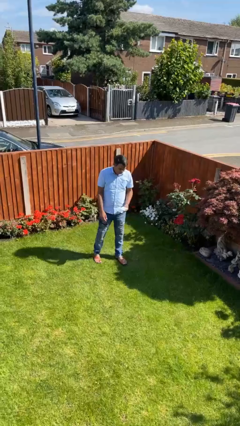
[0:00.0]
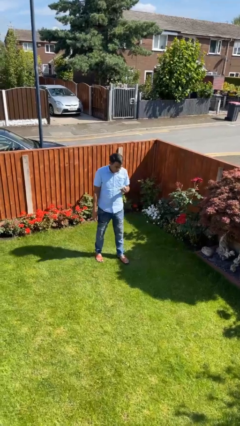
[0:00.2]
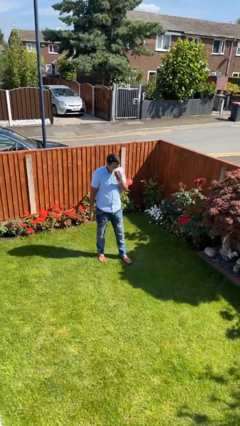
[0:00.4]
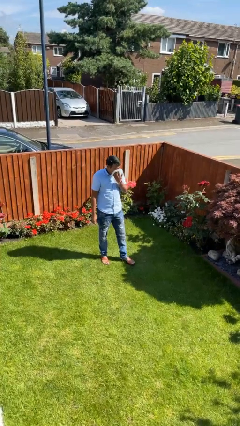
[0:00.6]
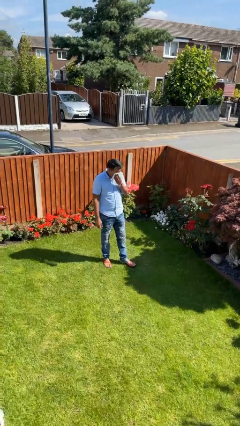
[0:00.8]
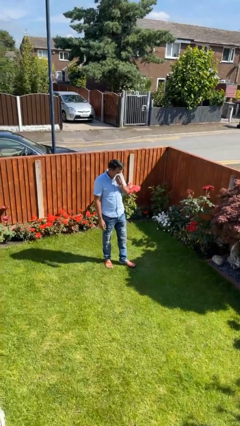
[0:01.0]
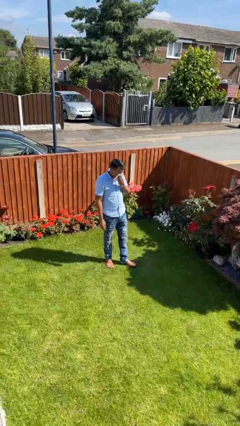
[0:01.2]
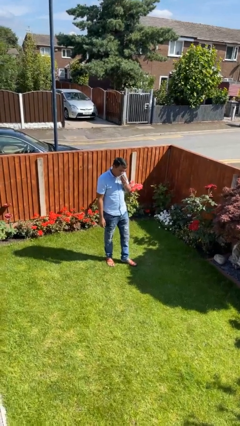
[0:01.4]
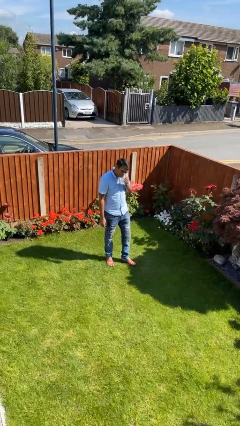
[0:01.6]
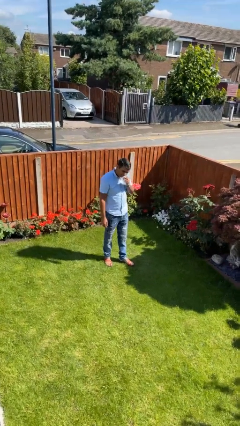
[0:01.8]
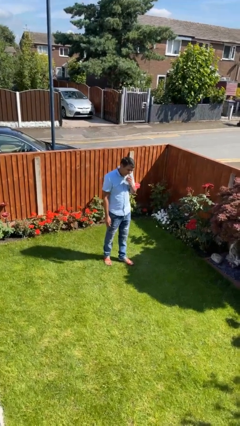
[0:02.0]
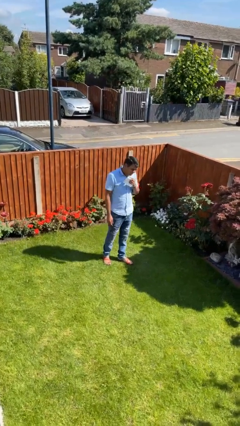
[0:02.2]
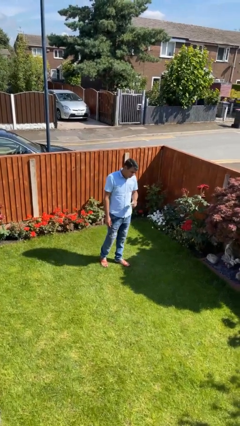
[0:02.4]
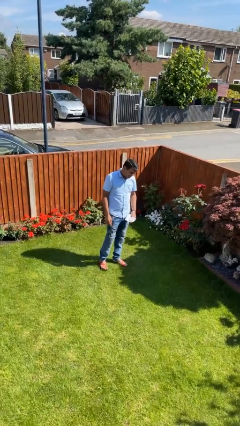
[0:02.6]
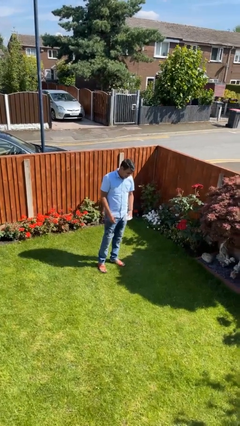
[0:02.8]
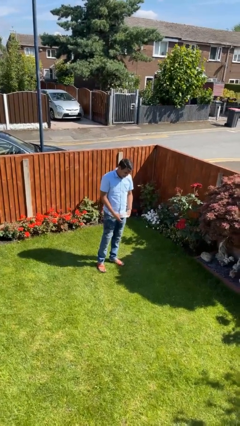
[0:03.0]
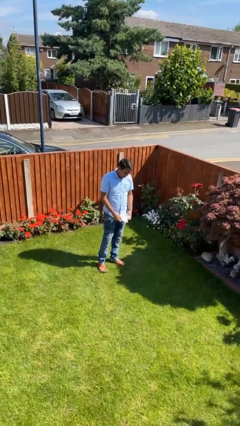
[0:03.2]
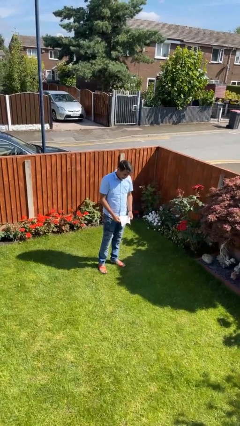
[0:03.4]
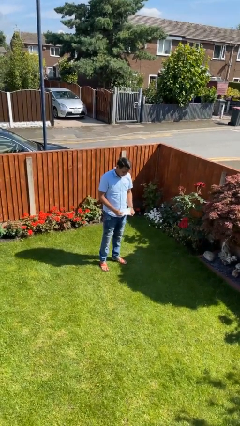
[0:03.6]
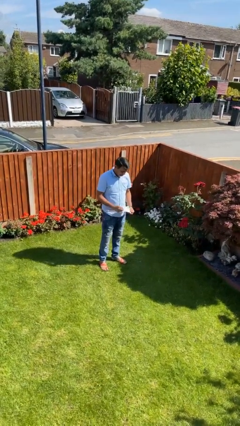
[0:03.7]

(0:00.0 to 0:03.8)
person wipes mouth with napkin

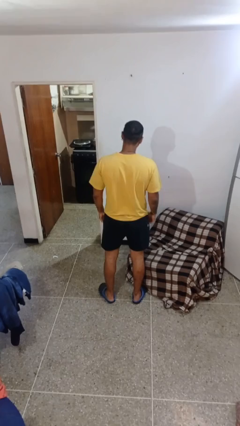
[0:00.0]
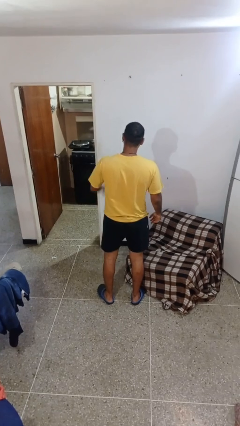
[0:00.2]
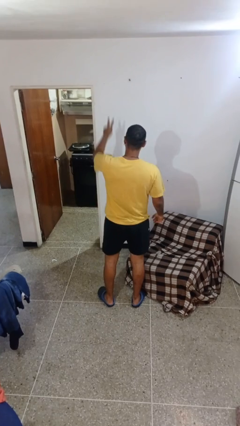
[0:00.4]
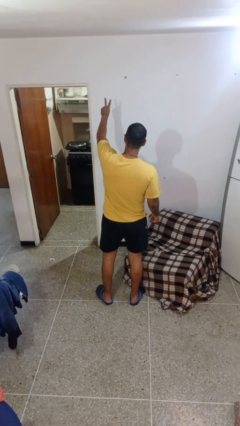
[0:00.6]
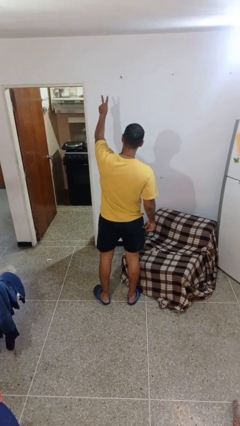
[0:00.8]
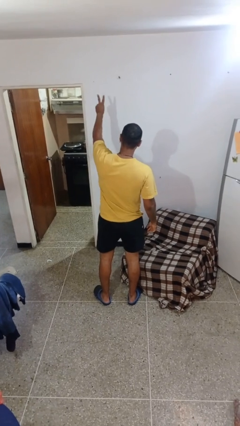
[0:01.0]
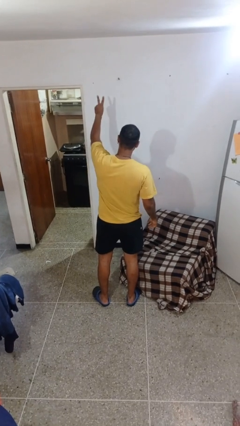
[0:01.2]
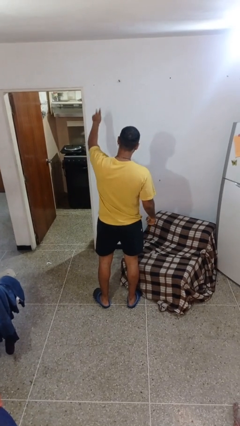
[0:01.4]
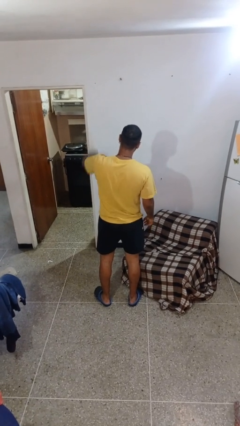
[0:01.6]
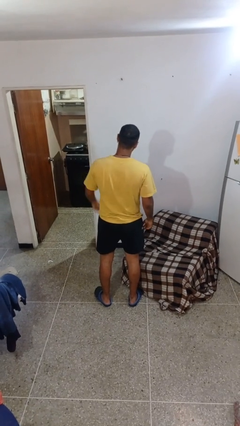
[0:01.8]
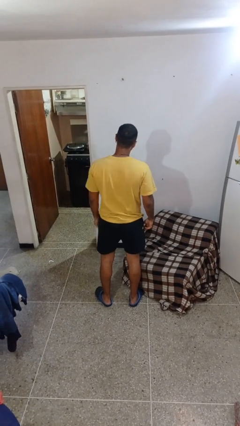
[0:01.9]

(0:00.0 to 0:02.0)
person gestures peace

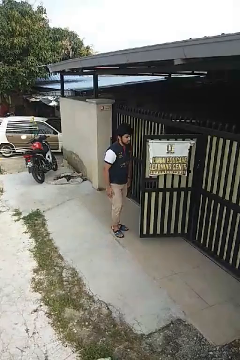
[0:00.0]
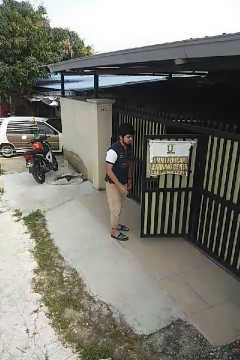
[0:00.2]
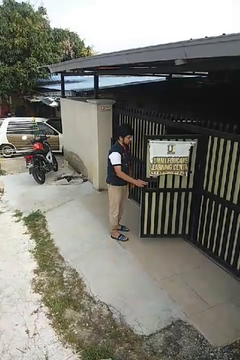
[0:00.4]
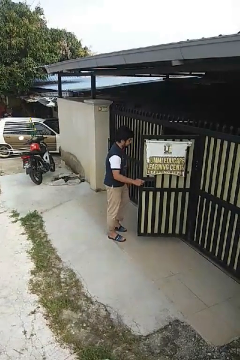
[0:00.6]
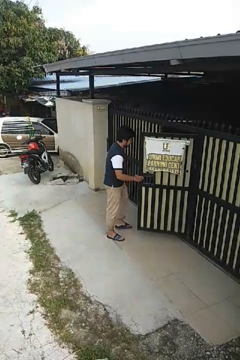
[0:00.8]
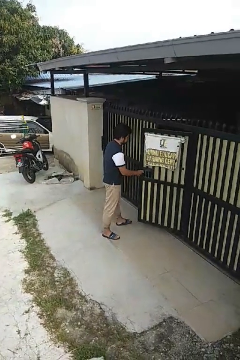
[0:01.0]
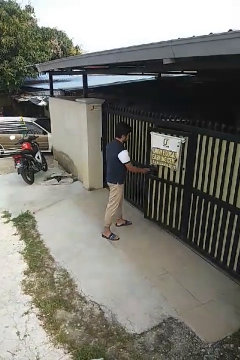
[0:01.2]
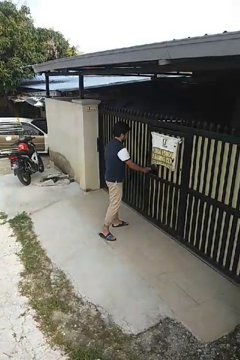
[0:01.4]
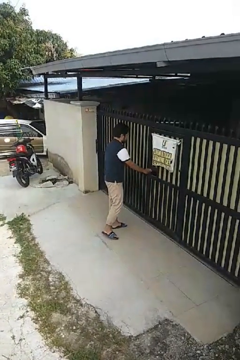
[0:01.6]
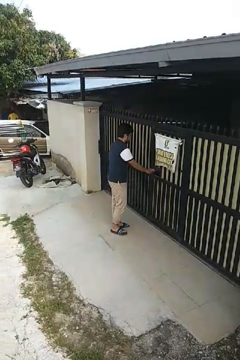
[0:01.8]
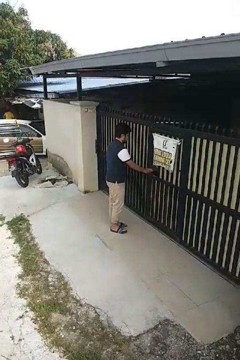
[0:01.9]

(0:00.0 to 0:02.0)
person closes gate

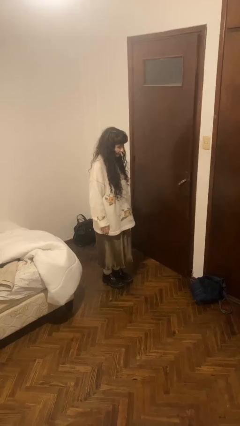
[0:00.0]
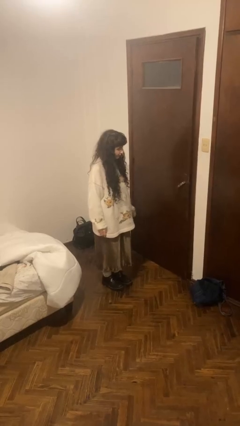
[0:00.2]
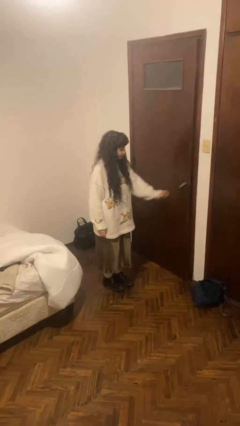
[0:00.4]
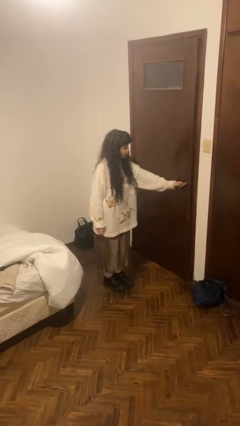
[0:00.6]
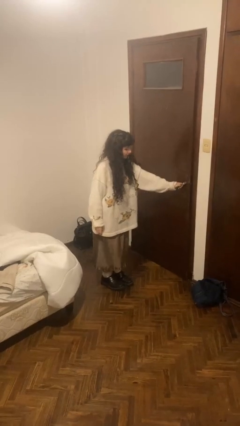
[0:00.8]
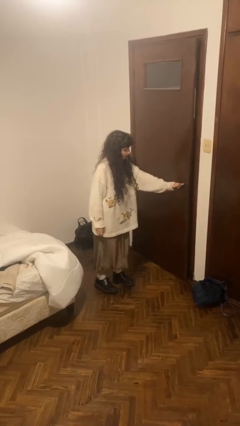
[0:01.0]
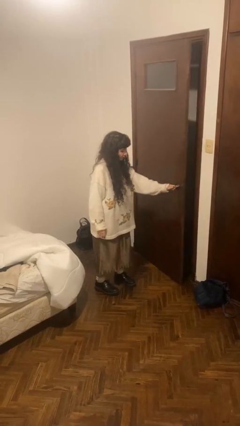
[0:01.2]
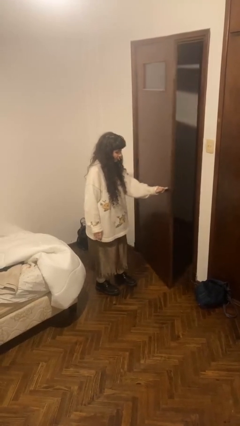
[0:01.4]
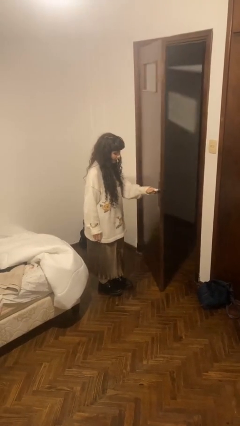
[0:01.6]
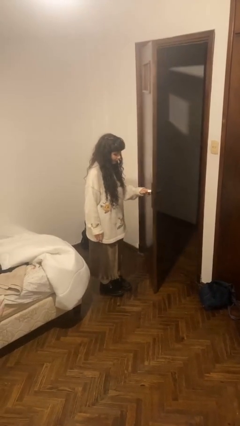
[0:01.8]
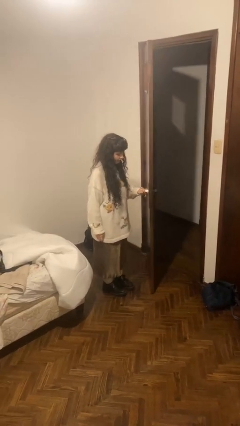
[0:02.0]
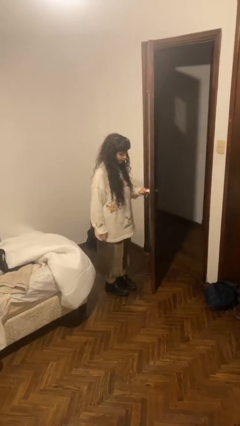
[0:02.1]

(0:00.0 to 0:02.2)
person opens facility door

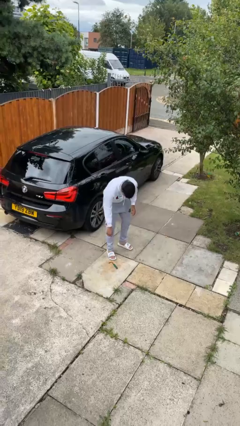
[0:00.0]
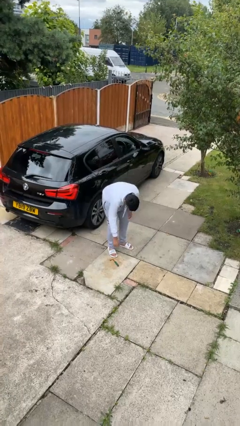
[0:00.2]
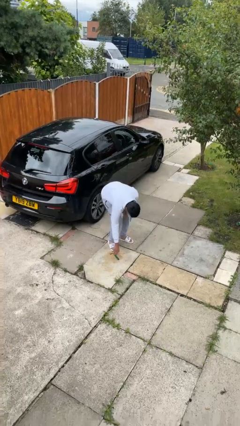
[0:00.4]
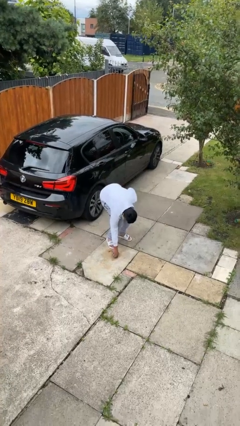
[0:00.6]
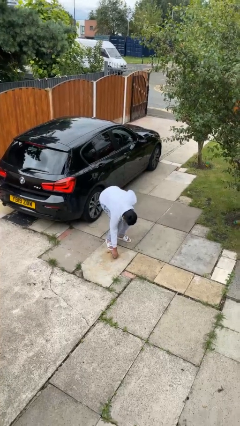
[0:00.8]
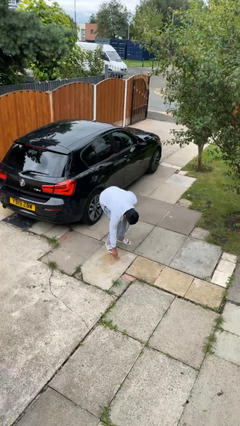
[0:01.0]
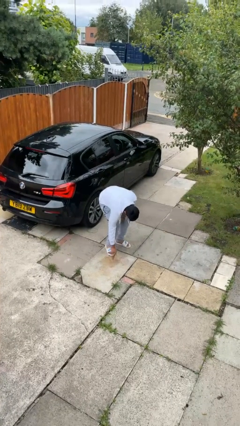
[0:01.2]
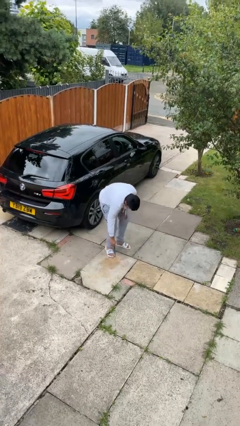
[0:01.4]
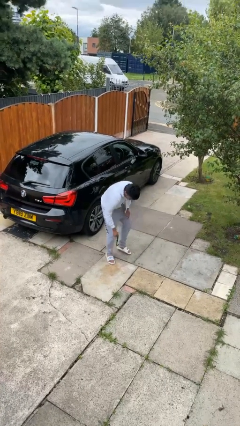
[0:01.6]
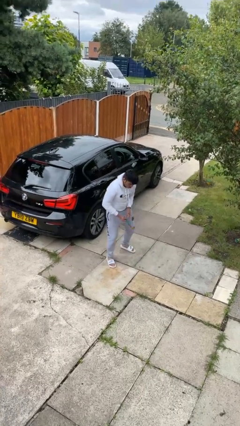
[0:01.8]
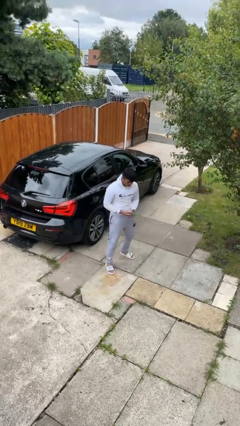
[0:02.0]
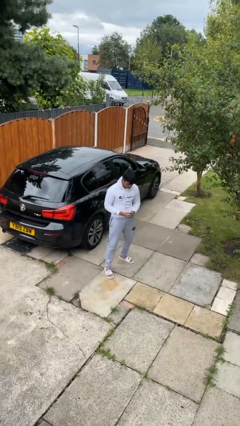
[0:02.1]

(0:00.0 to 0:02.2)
person picks up object from floor

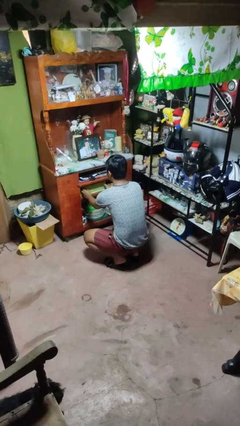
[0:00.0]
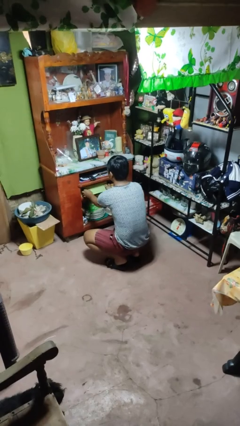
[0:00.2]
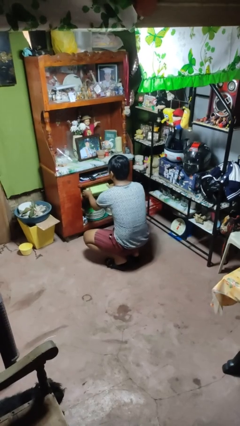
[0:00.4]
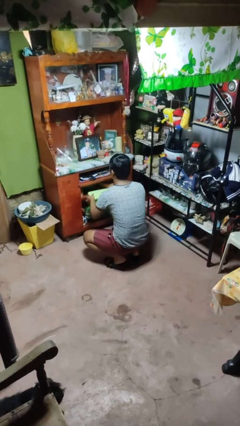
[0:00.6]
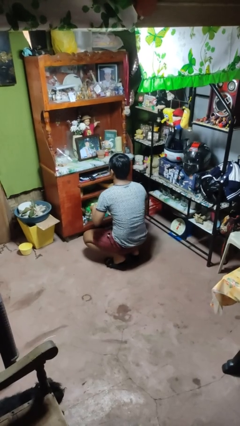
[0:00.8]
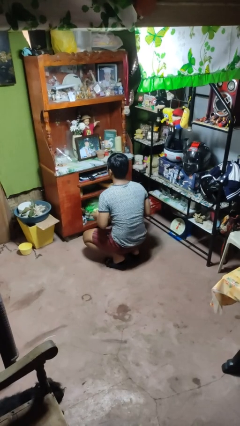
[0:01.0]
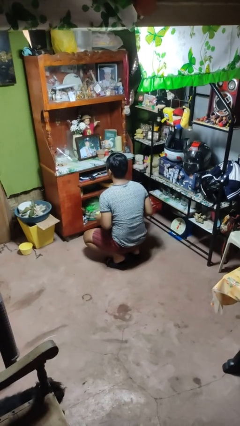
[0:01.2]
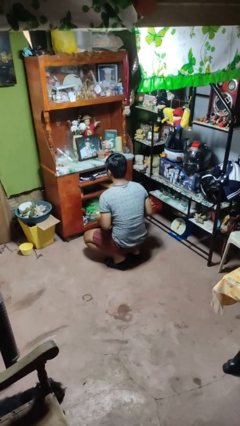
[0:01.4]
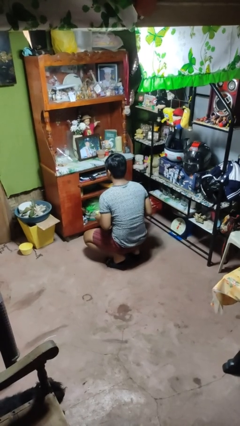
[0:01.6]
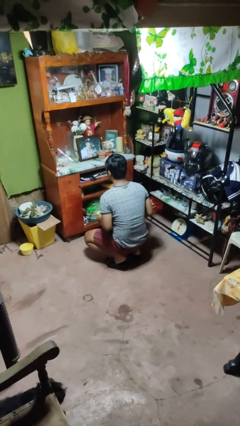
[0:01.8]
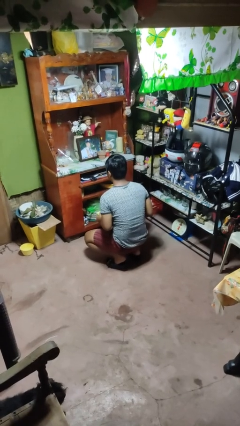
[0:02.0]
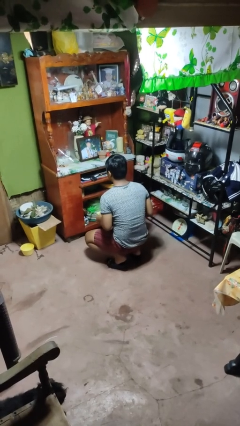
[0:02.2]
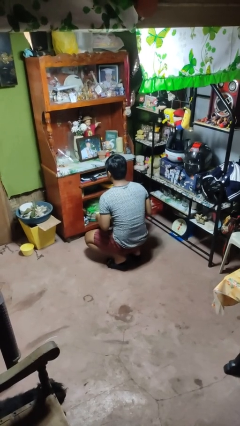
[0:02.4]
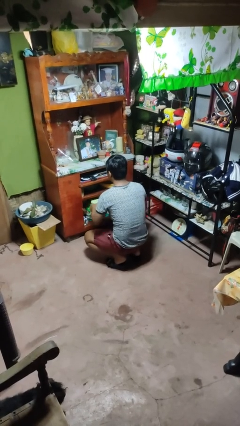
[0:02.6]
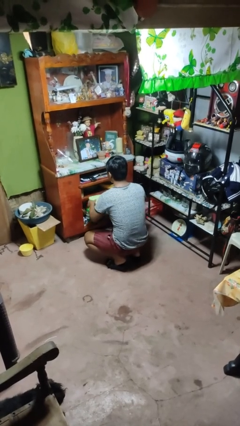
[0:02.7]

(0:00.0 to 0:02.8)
person picks up object from cabinet

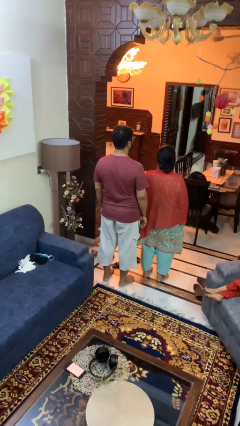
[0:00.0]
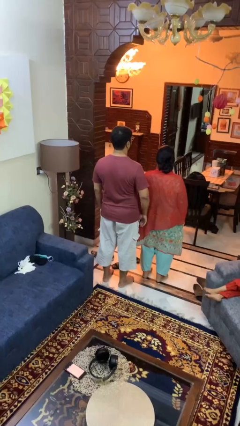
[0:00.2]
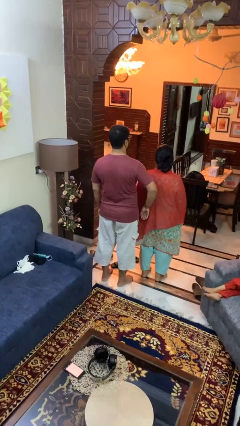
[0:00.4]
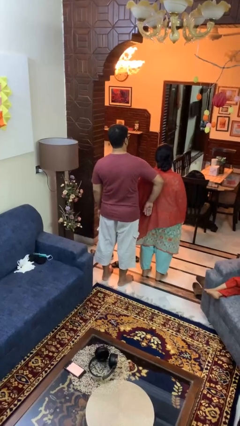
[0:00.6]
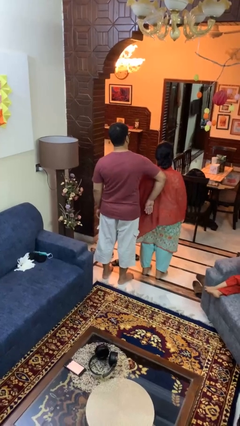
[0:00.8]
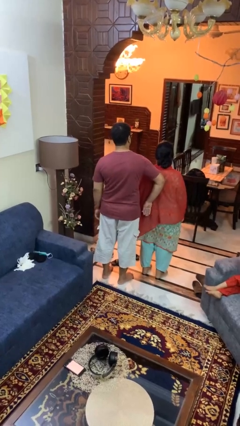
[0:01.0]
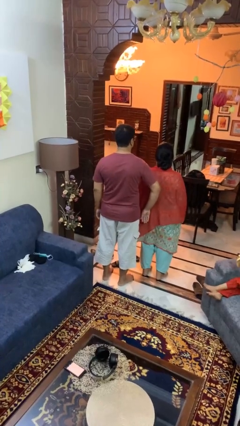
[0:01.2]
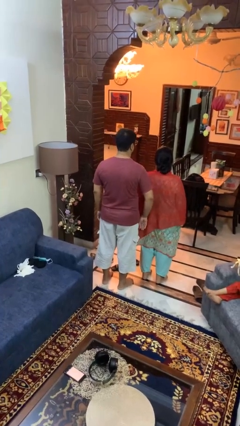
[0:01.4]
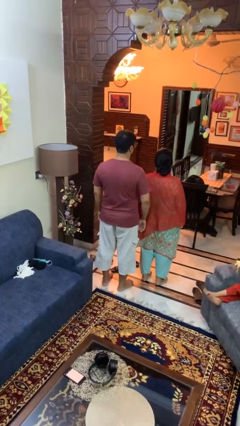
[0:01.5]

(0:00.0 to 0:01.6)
person shoves person

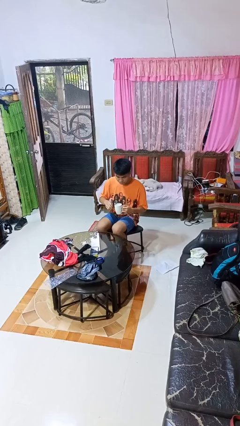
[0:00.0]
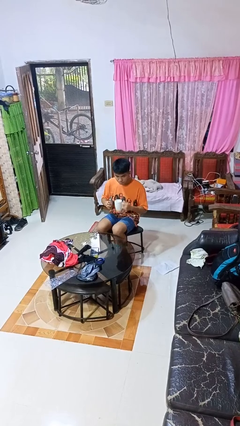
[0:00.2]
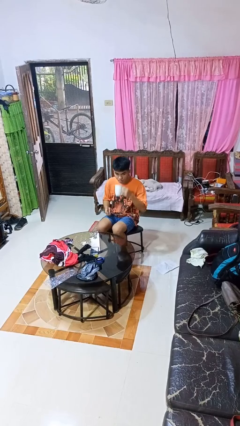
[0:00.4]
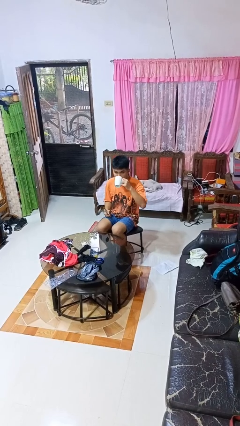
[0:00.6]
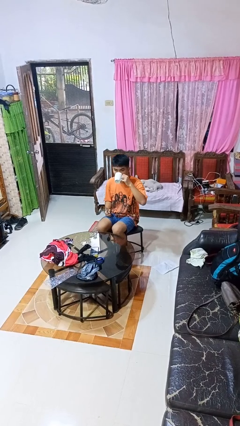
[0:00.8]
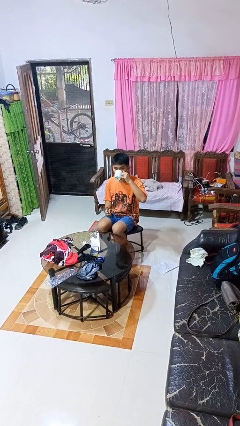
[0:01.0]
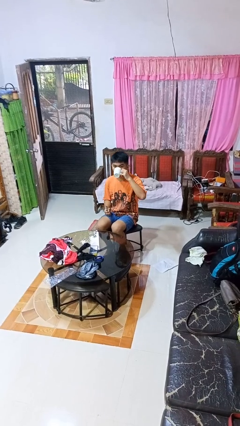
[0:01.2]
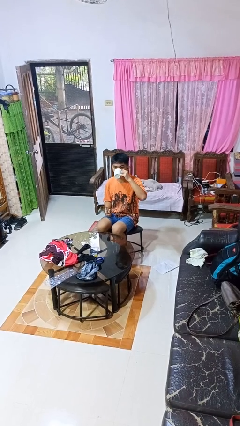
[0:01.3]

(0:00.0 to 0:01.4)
person drinks from mug
